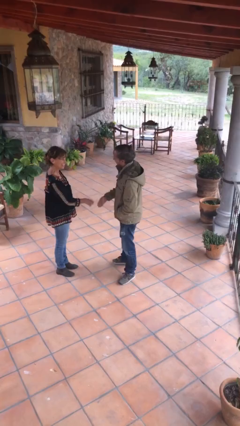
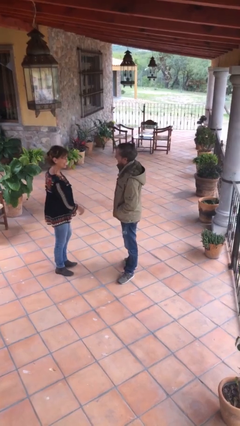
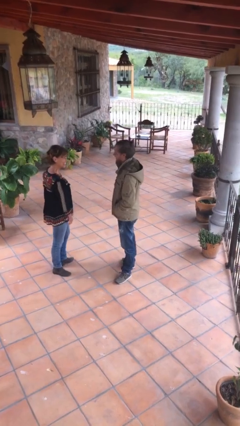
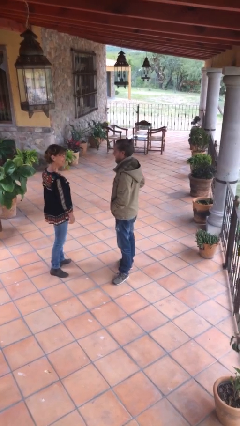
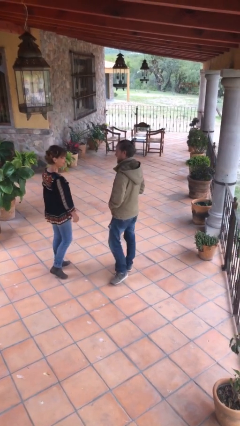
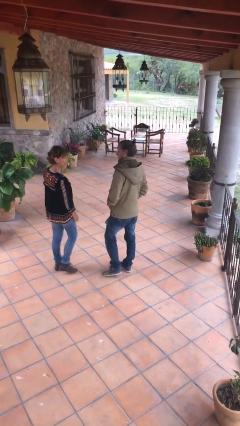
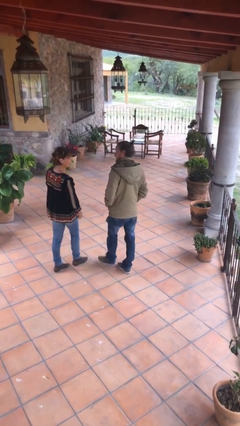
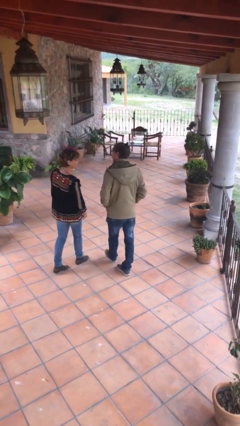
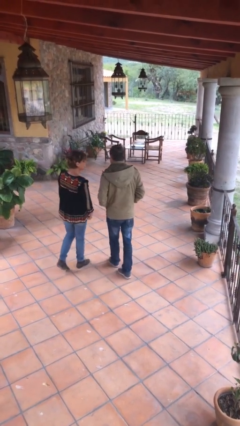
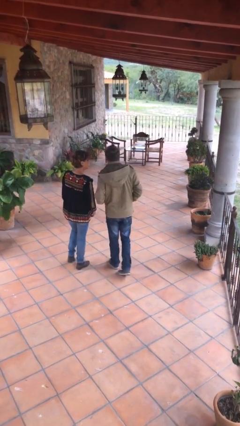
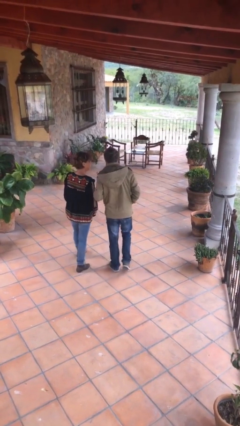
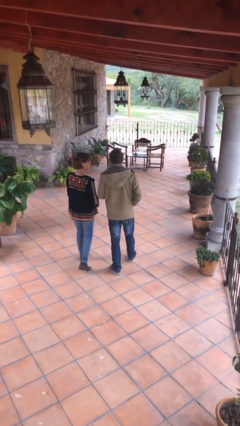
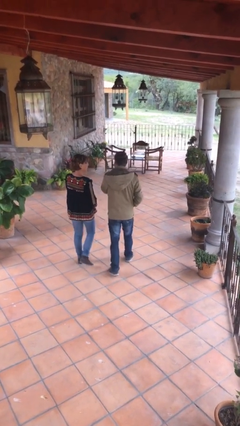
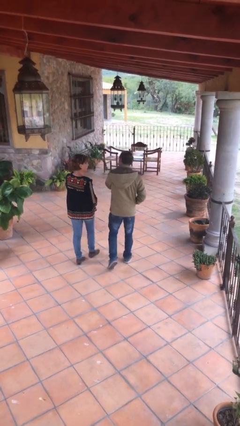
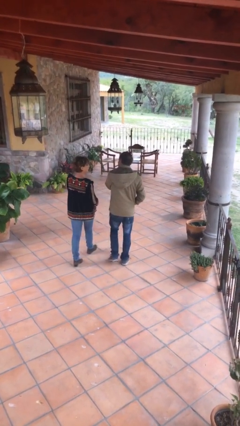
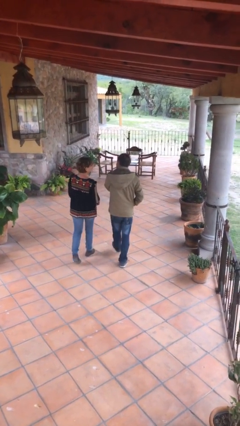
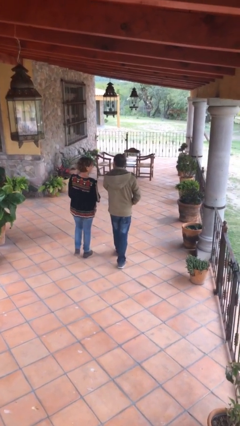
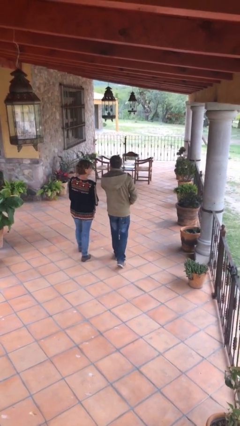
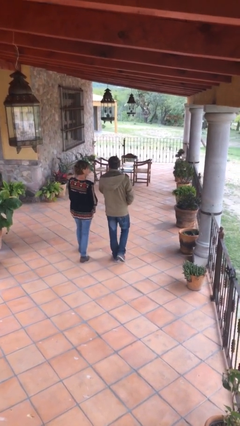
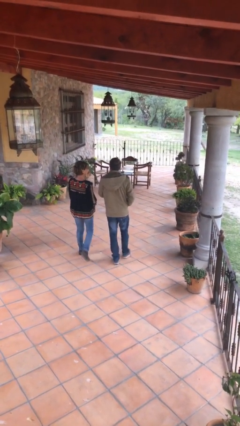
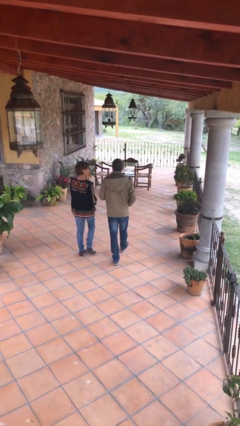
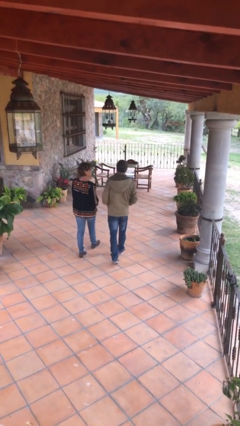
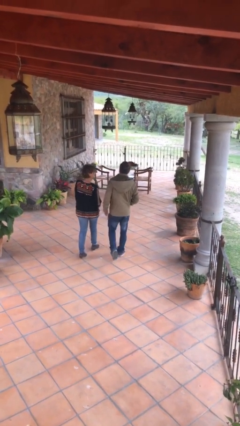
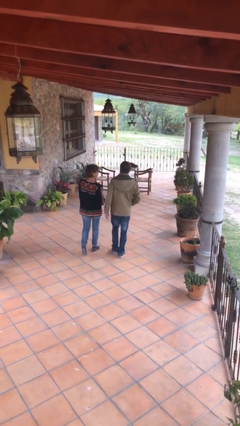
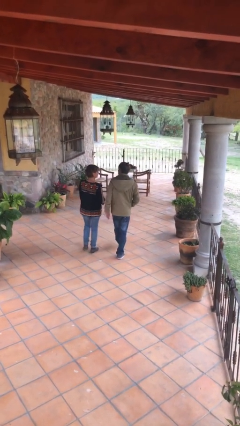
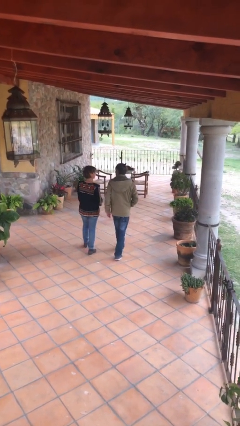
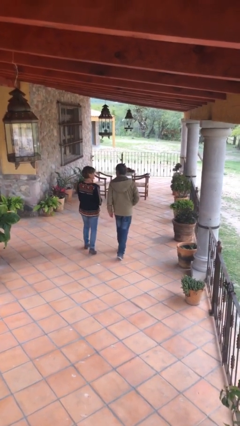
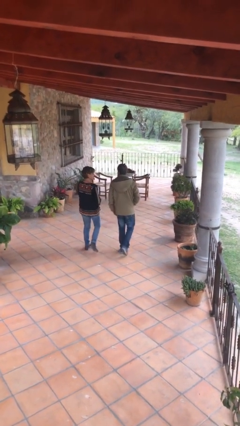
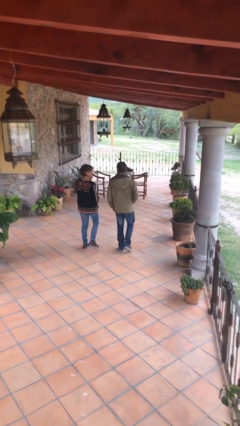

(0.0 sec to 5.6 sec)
person talks to person

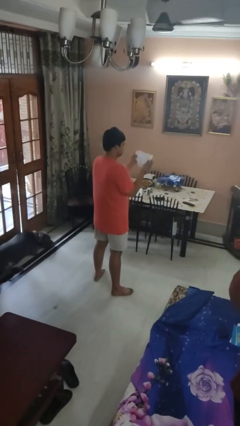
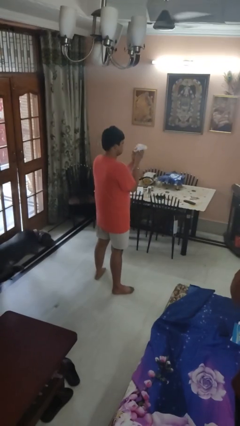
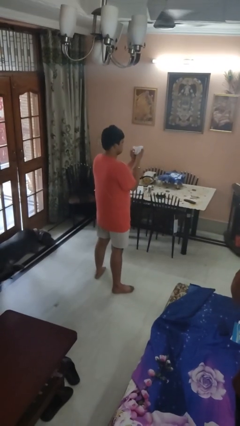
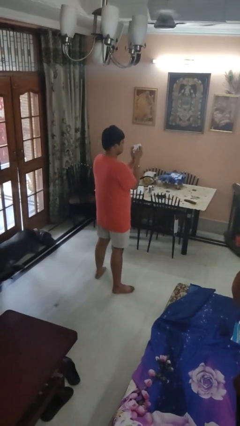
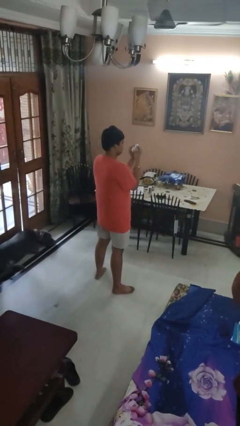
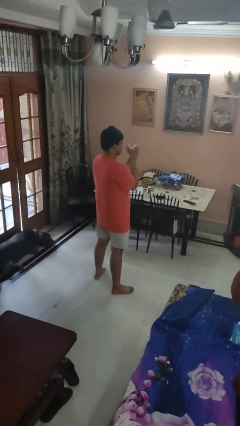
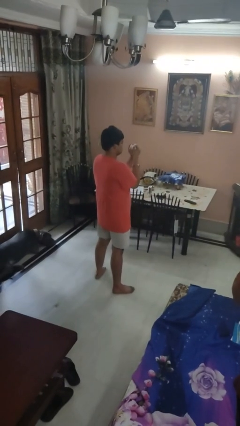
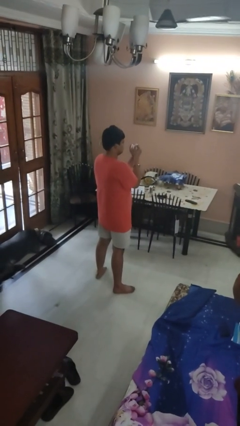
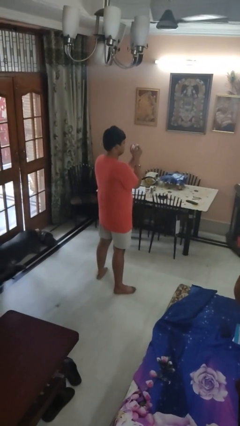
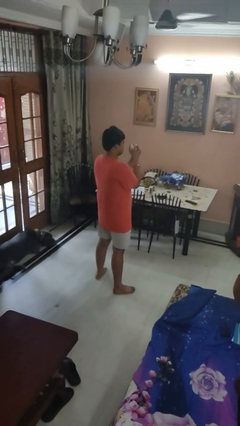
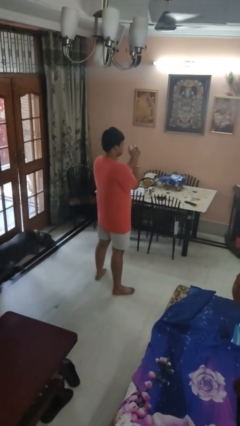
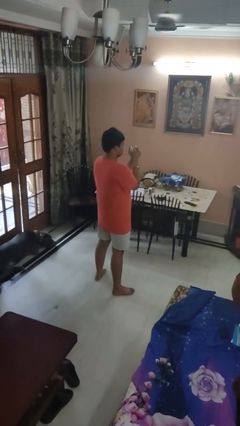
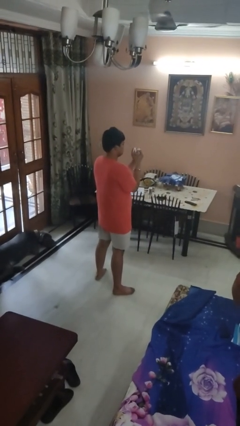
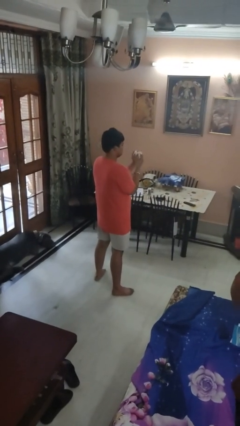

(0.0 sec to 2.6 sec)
person crumples paper

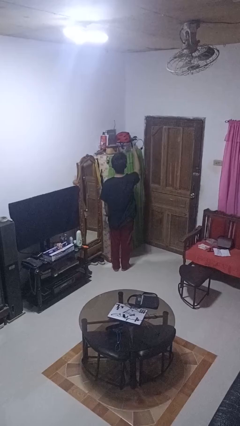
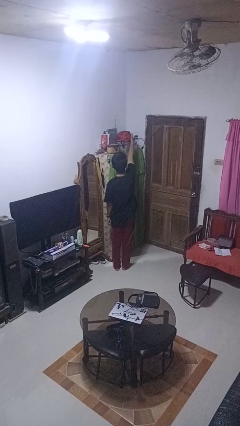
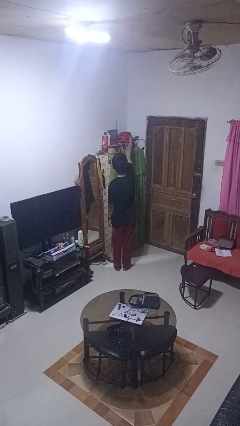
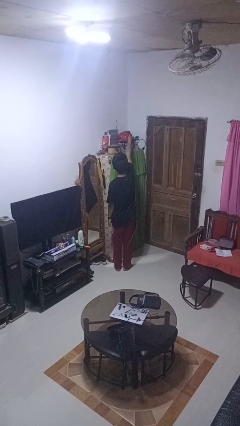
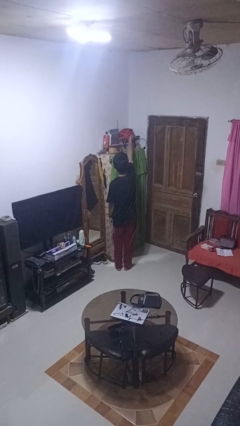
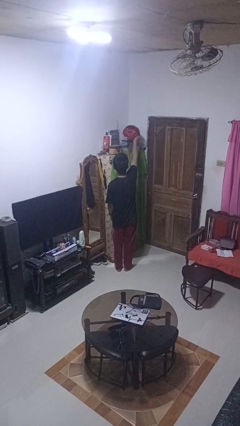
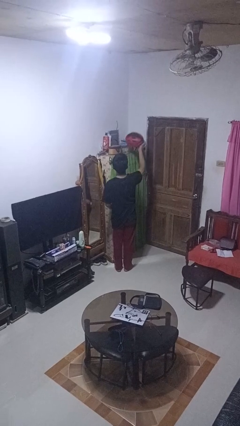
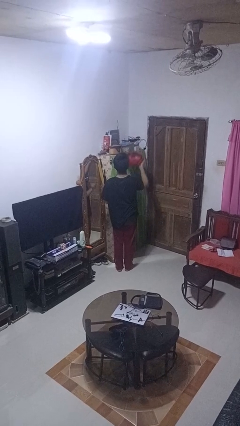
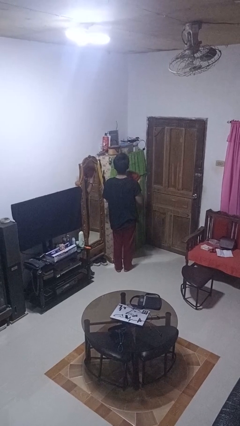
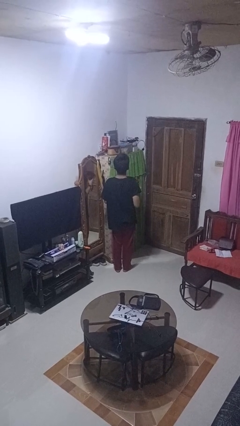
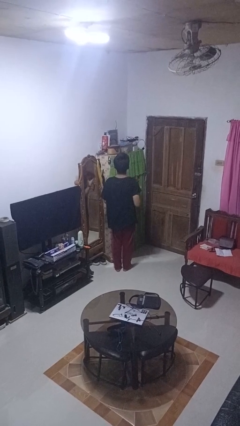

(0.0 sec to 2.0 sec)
person picks up object from shelf

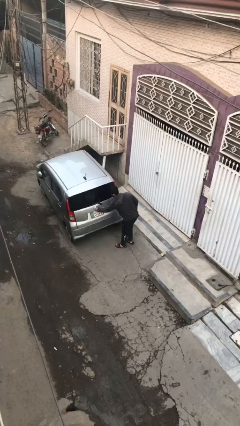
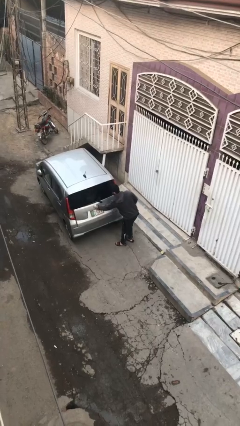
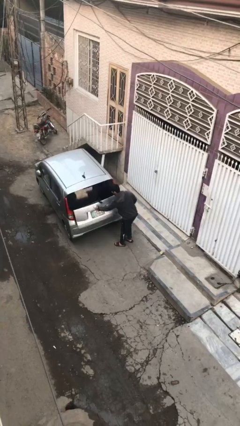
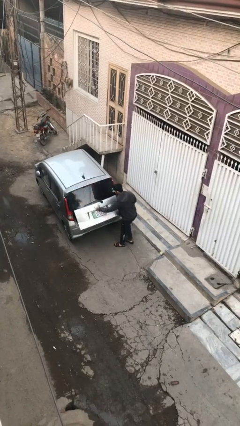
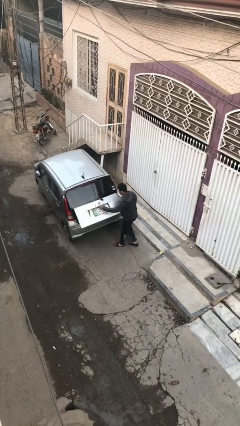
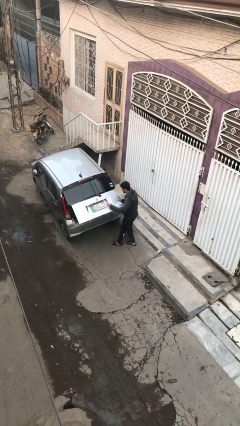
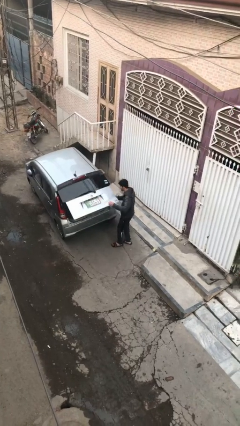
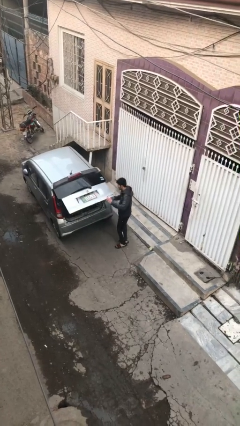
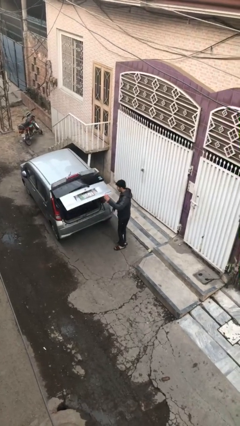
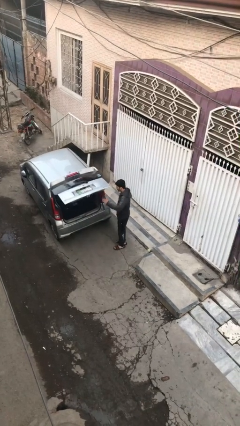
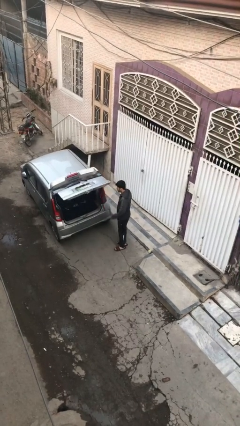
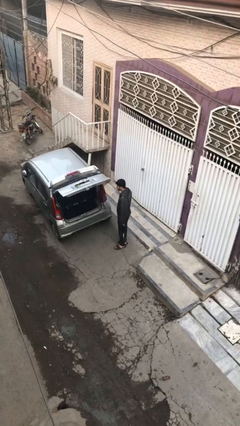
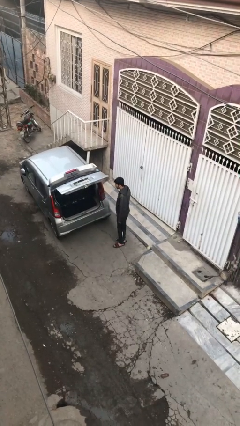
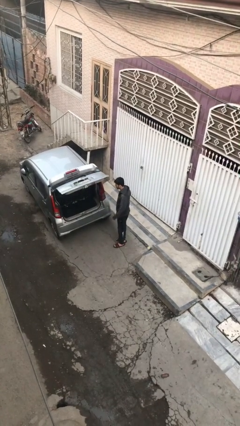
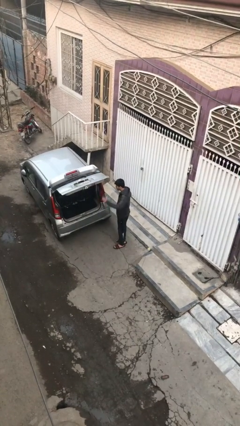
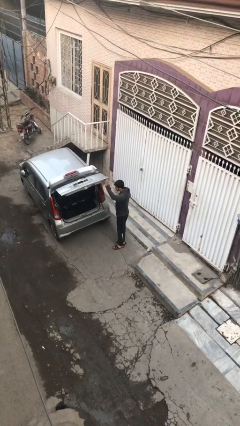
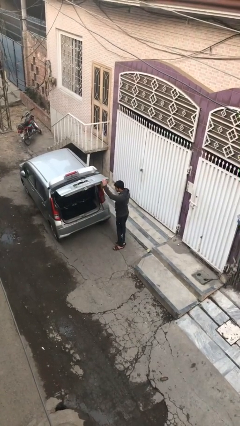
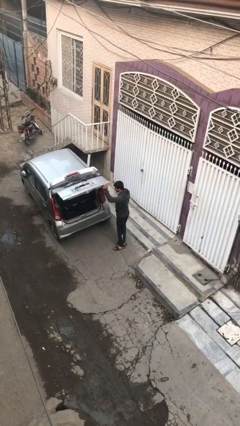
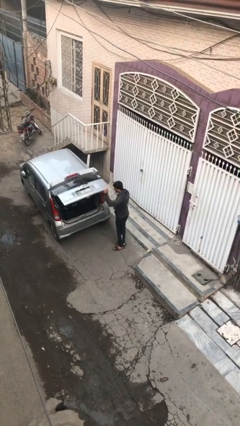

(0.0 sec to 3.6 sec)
person opens car trunk

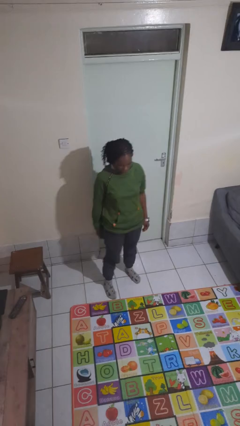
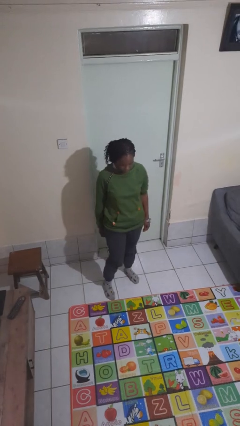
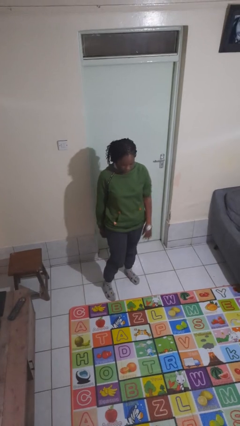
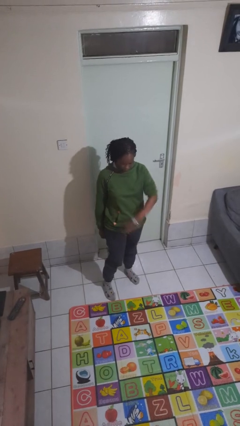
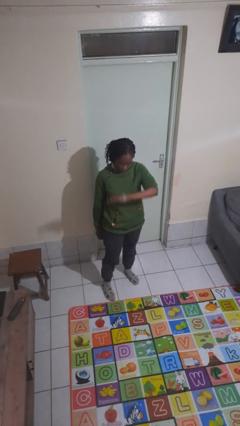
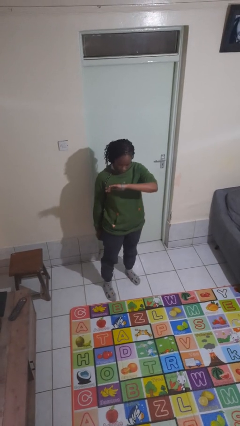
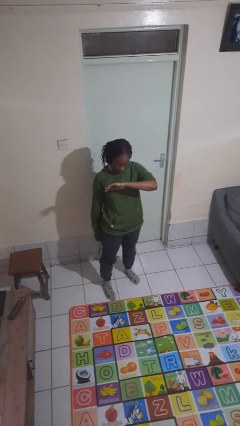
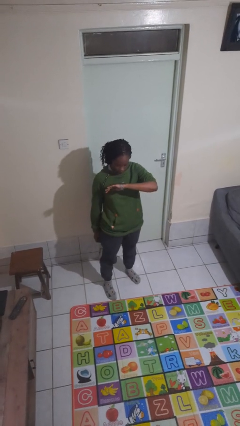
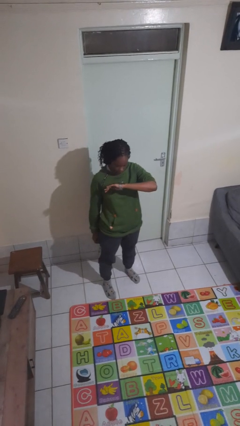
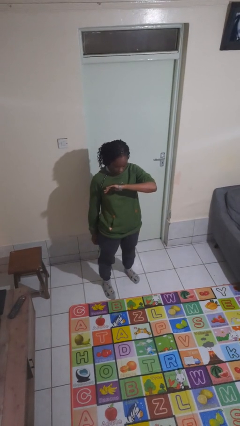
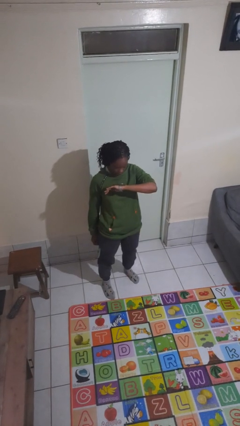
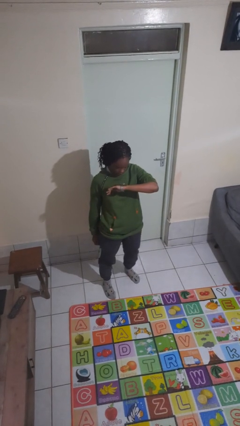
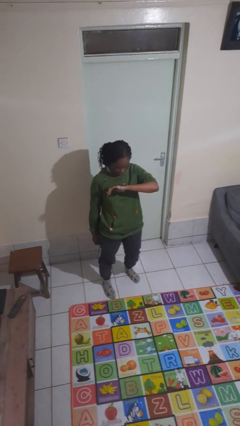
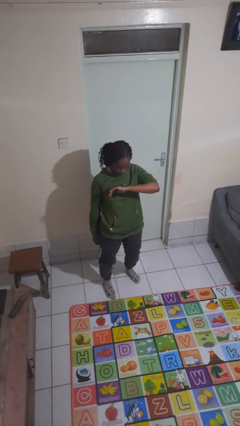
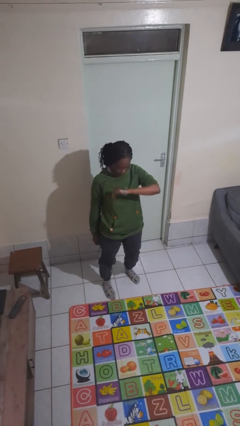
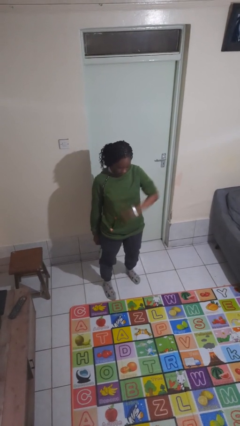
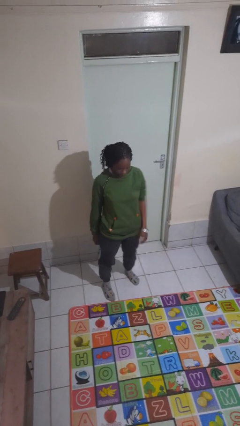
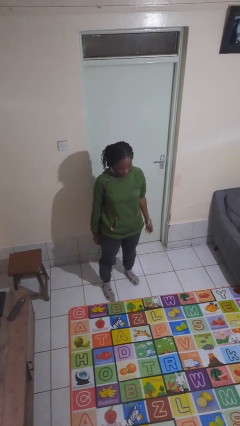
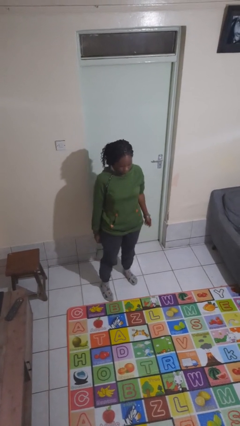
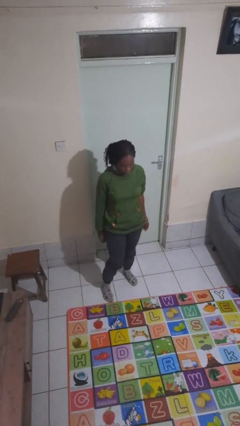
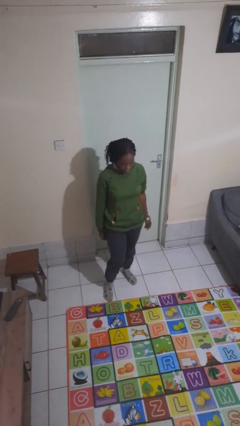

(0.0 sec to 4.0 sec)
person looks at wristwatch
